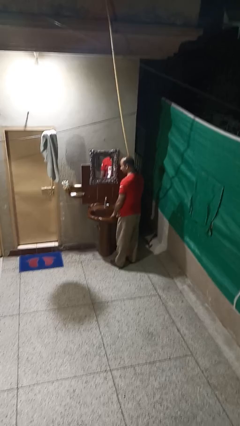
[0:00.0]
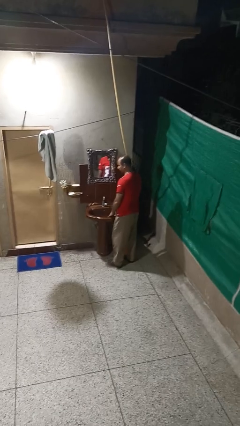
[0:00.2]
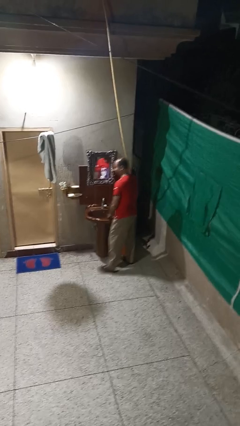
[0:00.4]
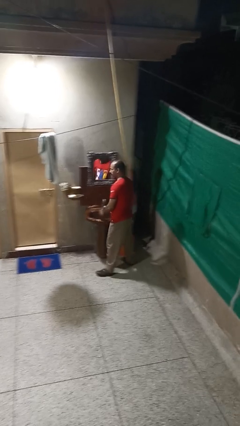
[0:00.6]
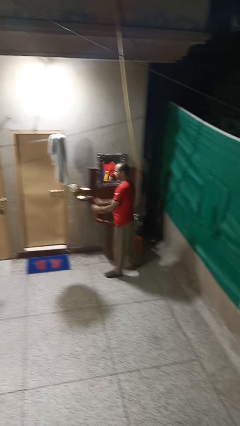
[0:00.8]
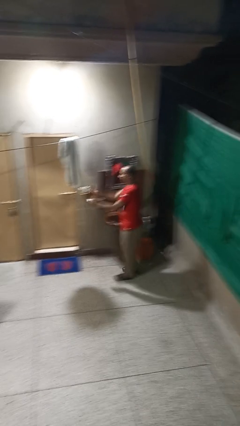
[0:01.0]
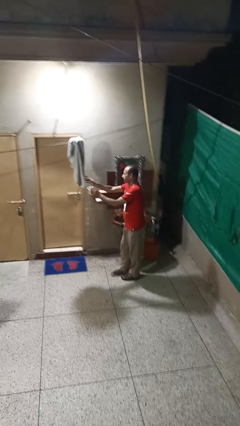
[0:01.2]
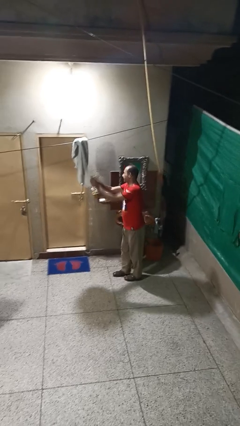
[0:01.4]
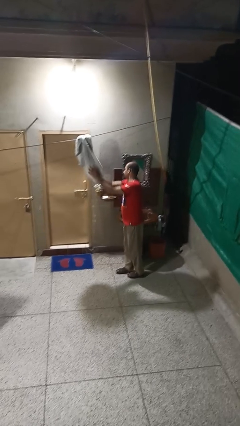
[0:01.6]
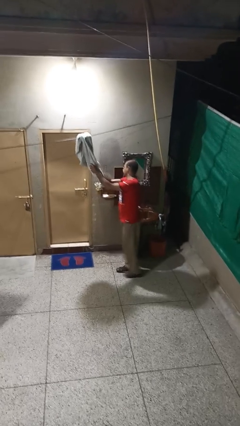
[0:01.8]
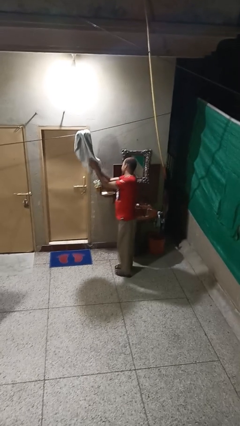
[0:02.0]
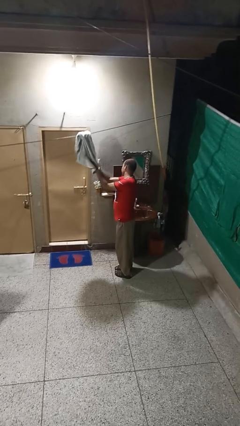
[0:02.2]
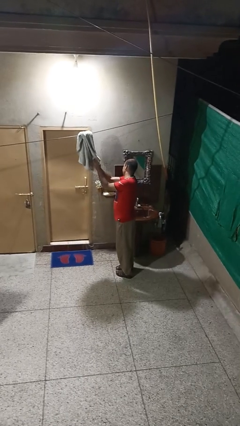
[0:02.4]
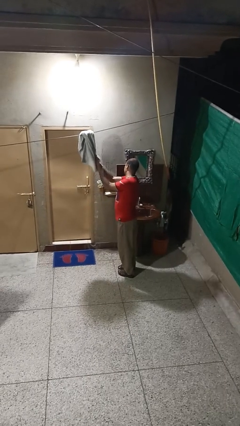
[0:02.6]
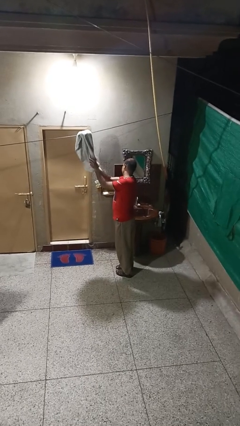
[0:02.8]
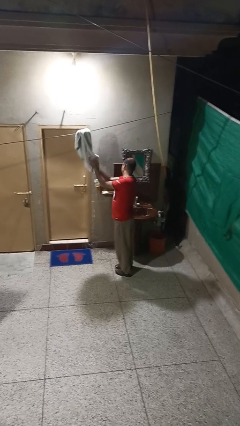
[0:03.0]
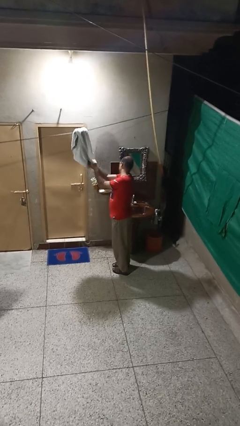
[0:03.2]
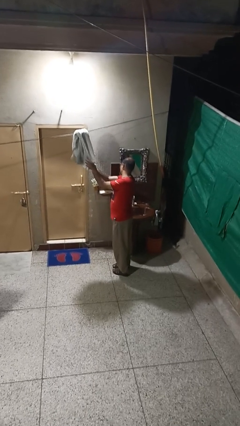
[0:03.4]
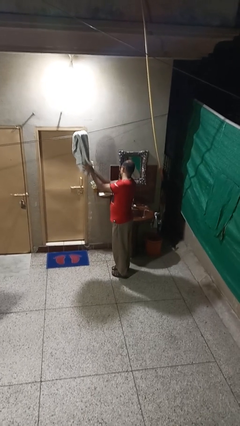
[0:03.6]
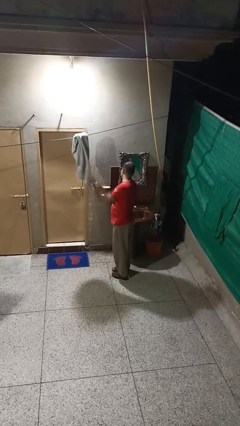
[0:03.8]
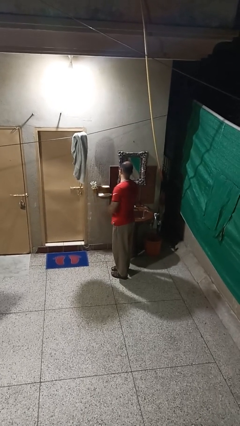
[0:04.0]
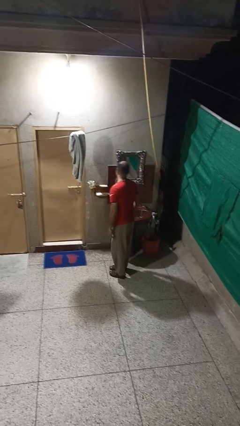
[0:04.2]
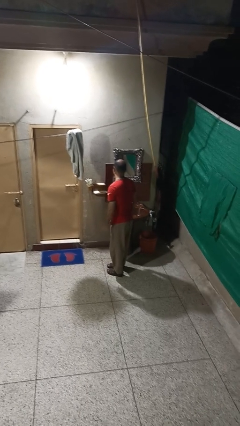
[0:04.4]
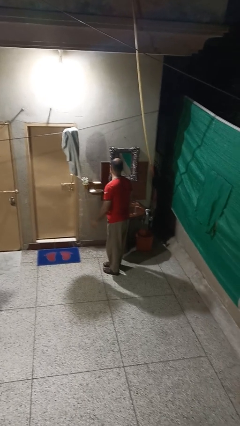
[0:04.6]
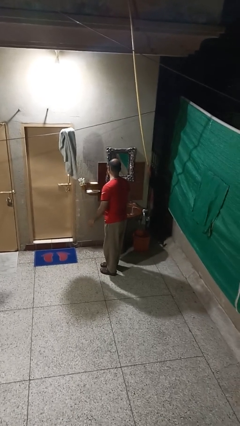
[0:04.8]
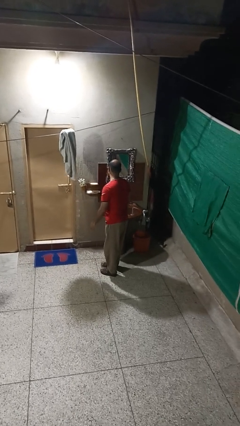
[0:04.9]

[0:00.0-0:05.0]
person dries hands with towel

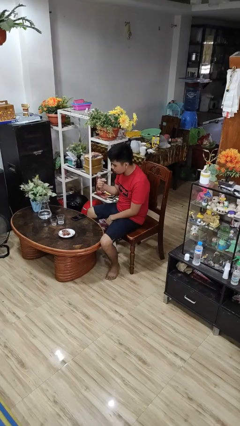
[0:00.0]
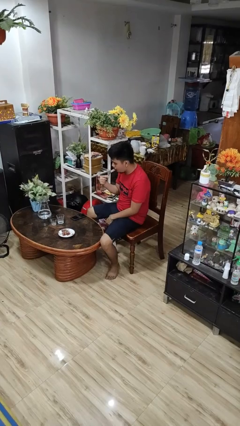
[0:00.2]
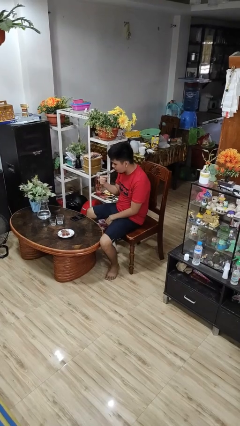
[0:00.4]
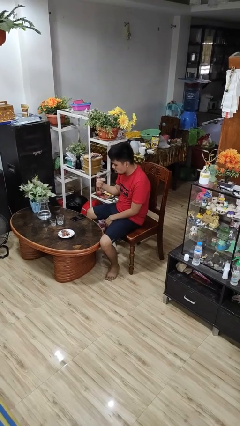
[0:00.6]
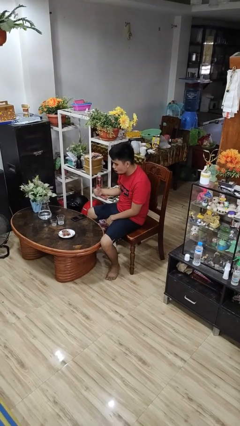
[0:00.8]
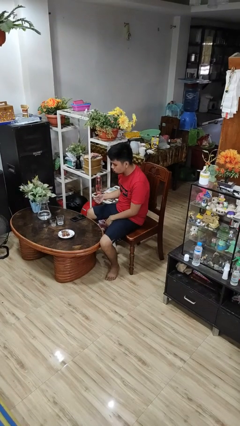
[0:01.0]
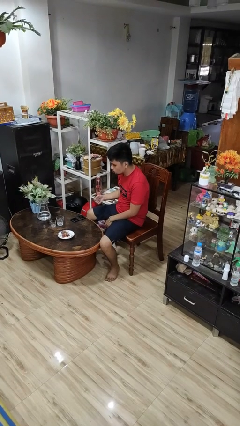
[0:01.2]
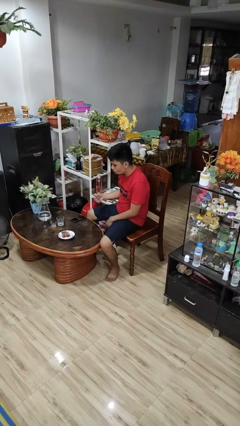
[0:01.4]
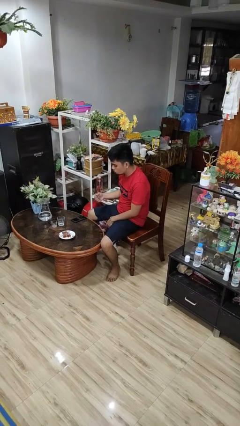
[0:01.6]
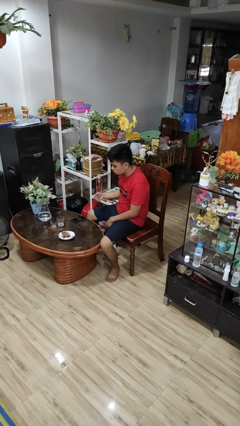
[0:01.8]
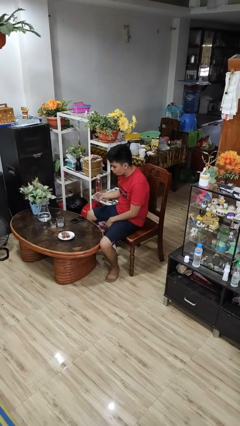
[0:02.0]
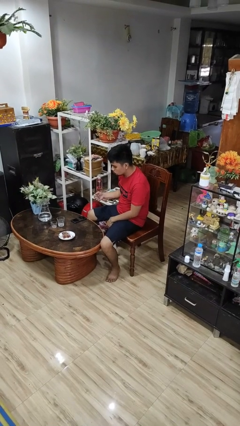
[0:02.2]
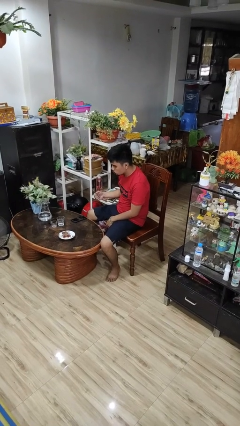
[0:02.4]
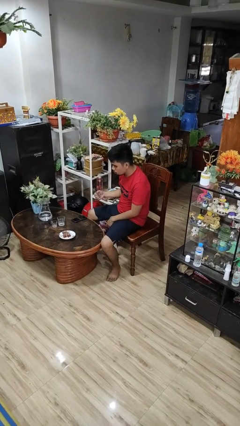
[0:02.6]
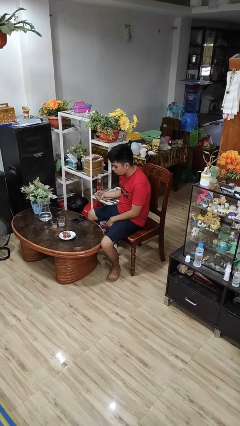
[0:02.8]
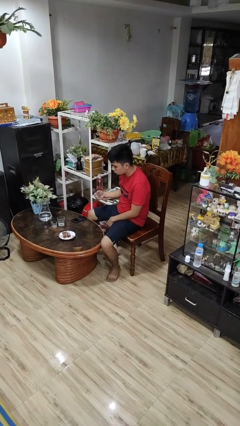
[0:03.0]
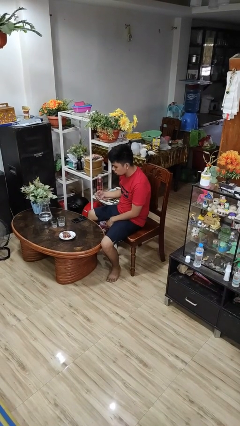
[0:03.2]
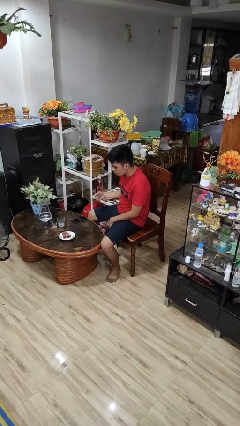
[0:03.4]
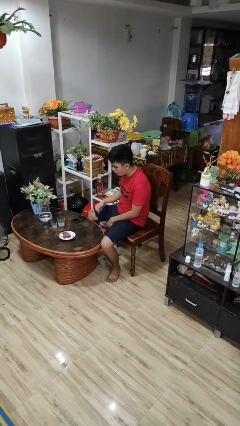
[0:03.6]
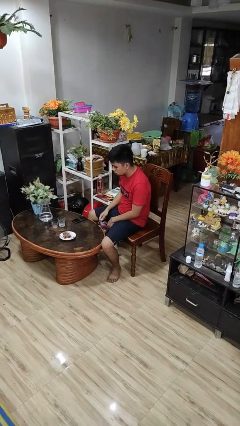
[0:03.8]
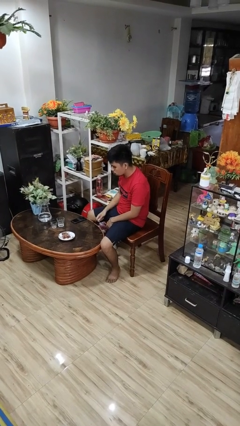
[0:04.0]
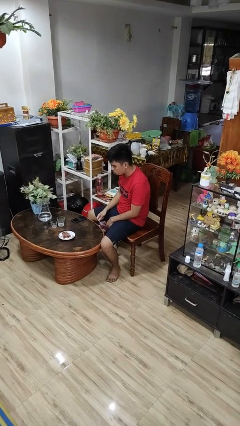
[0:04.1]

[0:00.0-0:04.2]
person eats with utensil

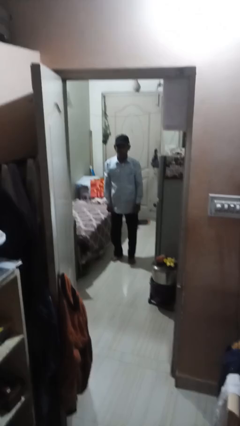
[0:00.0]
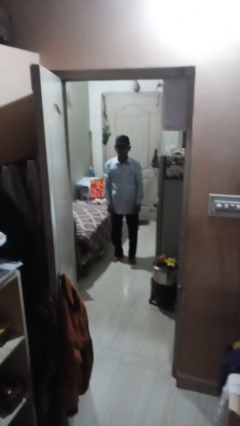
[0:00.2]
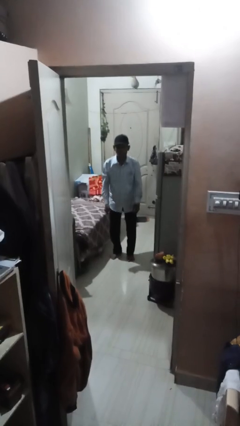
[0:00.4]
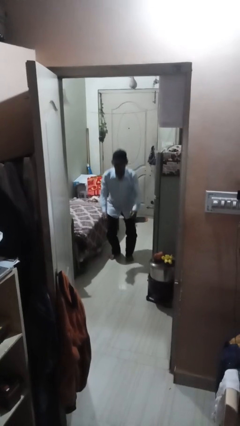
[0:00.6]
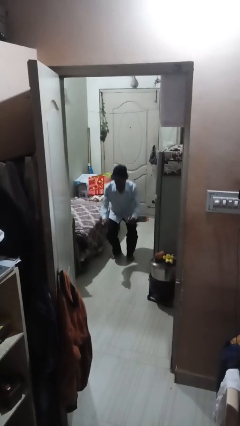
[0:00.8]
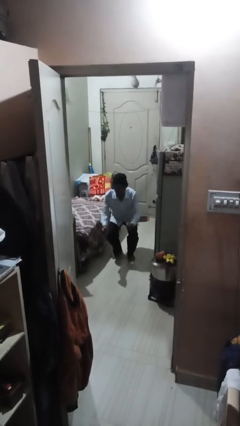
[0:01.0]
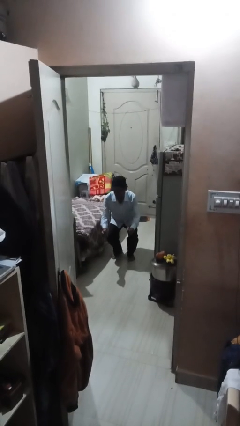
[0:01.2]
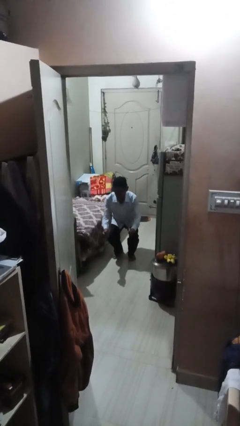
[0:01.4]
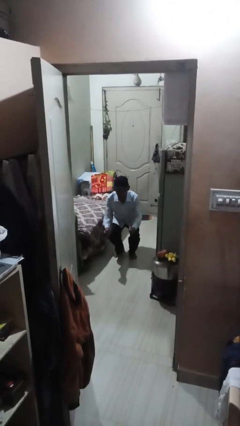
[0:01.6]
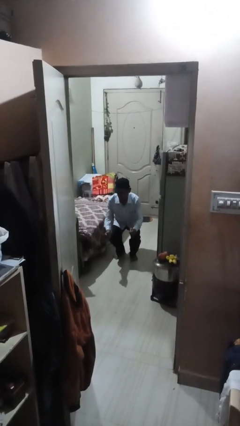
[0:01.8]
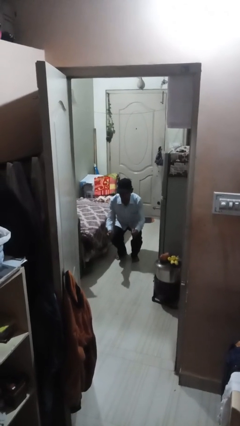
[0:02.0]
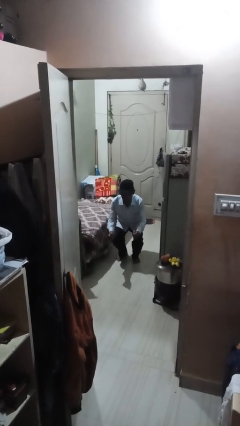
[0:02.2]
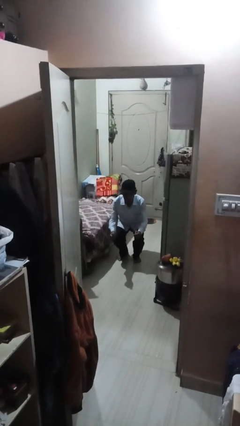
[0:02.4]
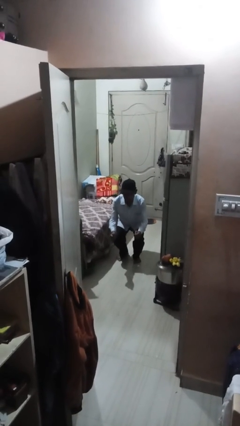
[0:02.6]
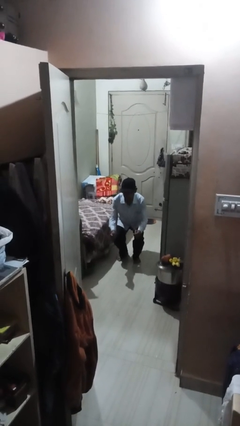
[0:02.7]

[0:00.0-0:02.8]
person squats

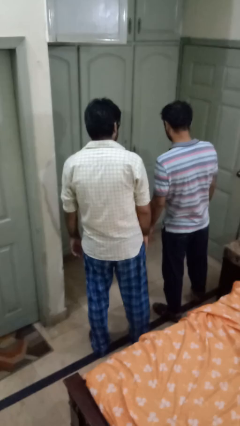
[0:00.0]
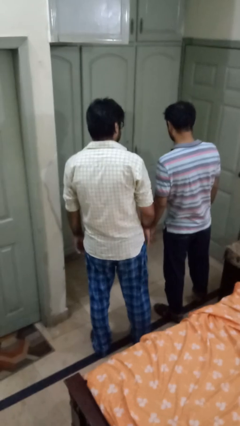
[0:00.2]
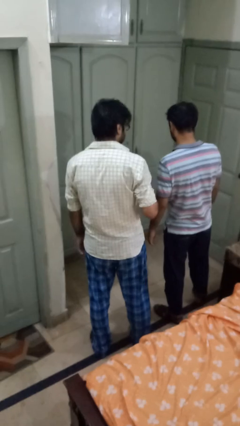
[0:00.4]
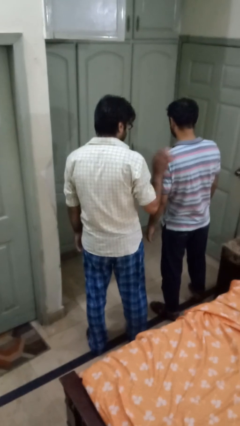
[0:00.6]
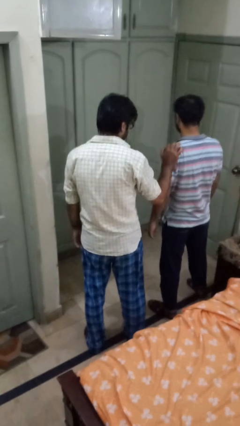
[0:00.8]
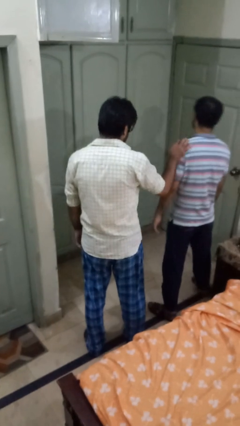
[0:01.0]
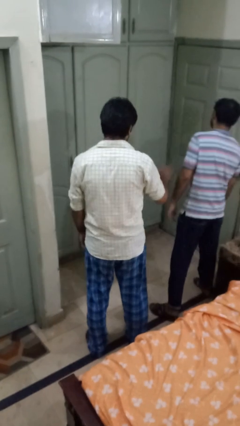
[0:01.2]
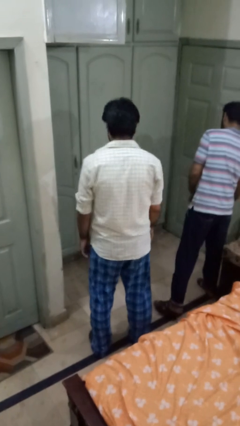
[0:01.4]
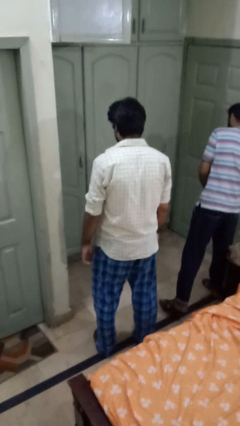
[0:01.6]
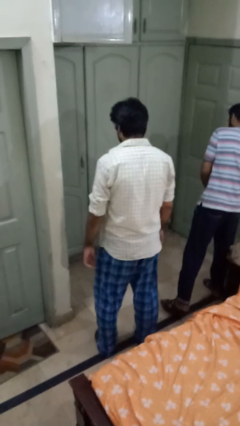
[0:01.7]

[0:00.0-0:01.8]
person shoves person

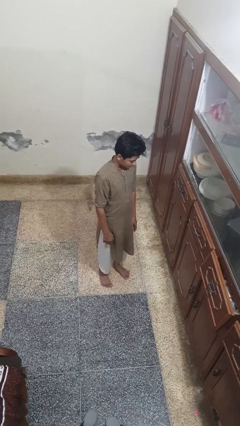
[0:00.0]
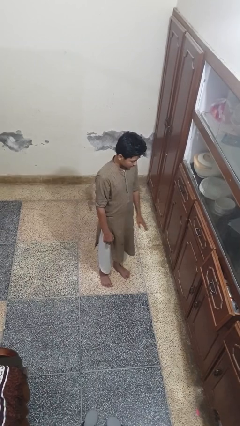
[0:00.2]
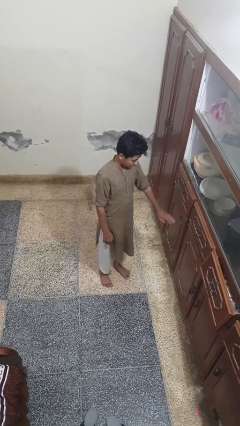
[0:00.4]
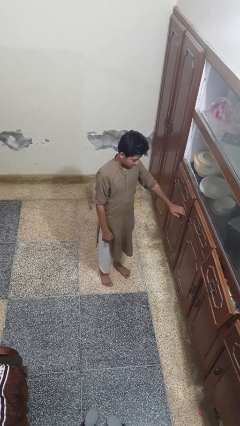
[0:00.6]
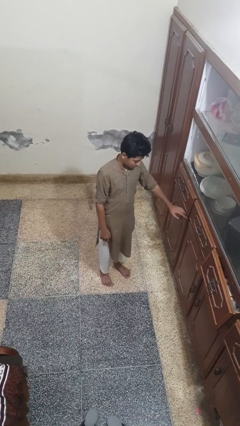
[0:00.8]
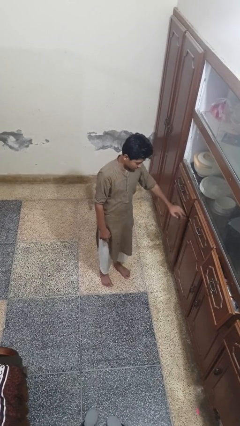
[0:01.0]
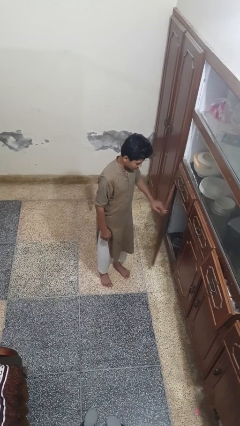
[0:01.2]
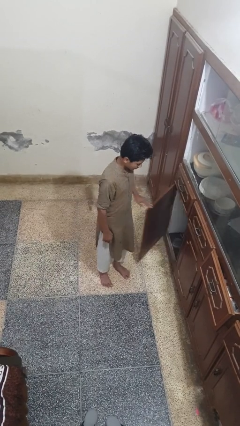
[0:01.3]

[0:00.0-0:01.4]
person opens cabinet

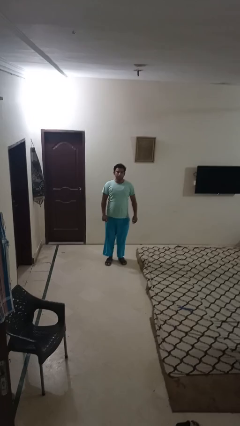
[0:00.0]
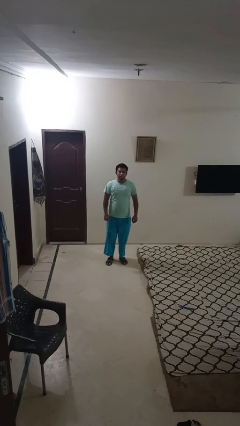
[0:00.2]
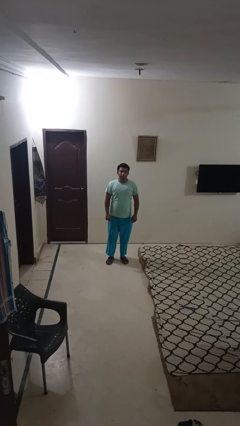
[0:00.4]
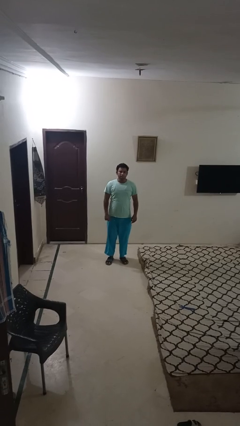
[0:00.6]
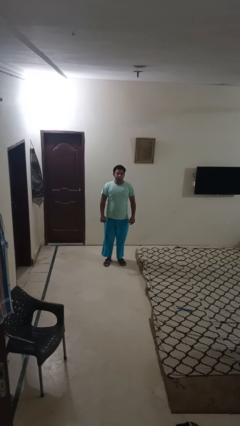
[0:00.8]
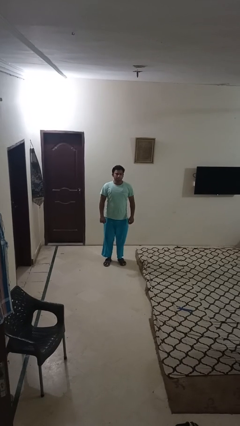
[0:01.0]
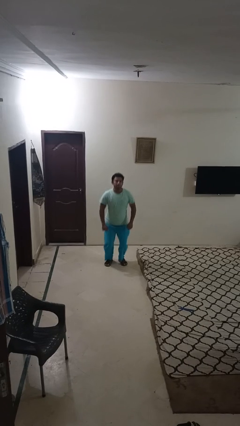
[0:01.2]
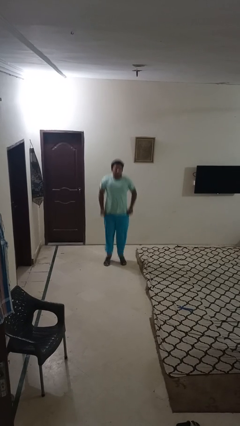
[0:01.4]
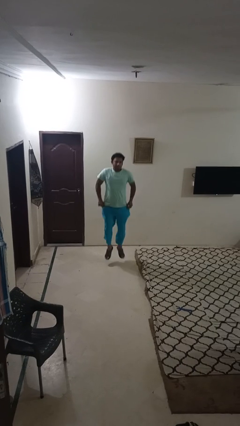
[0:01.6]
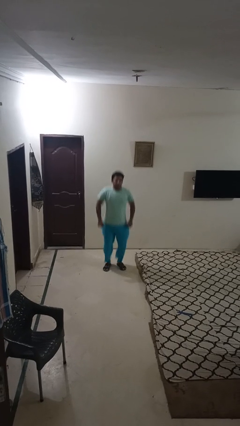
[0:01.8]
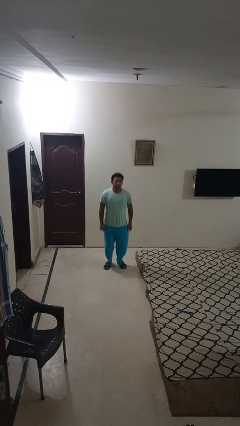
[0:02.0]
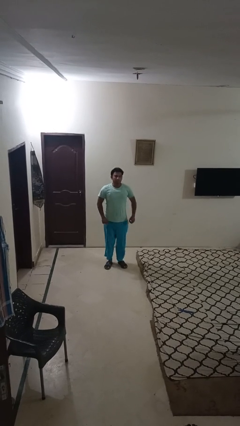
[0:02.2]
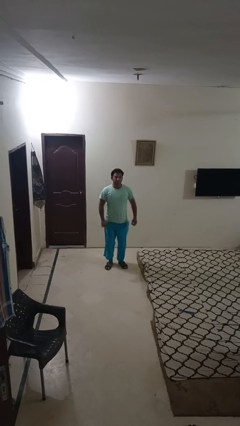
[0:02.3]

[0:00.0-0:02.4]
person jumps
